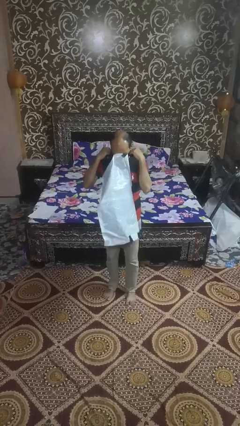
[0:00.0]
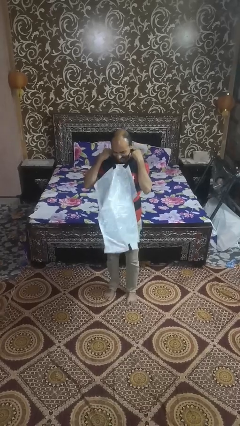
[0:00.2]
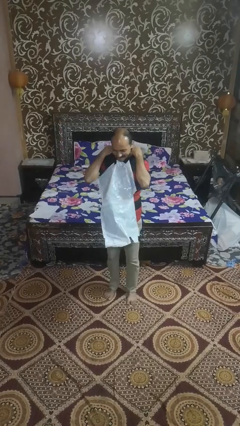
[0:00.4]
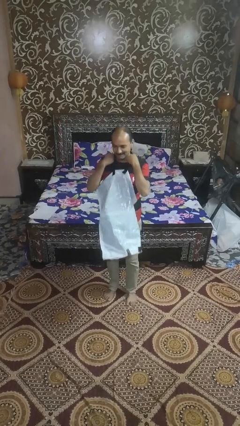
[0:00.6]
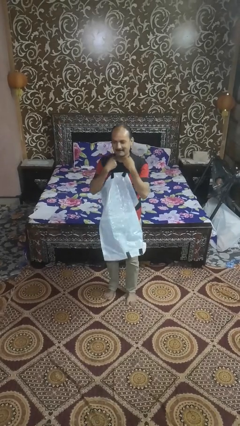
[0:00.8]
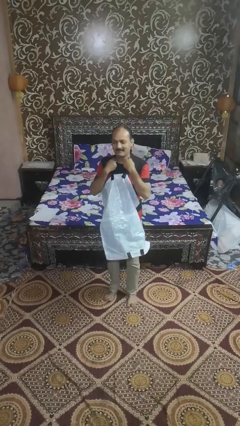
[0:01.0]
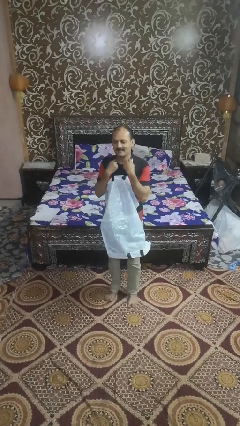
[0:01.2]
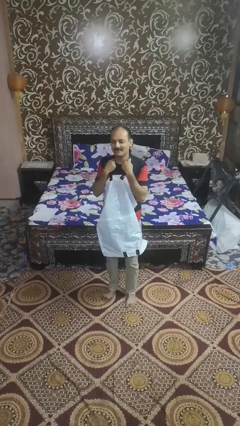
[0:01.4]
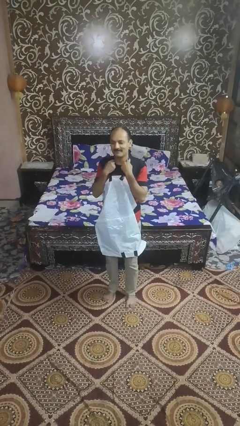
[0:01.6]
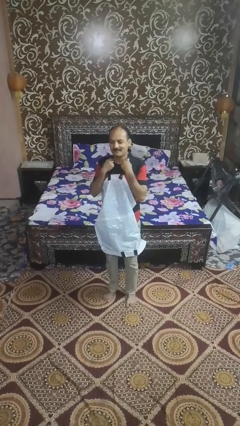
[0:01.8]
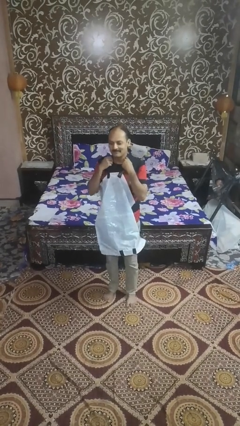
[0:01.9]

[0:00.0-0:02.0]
person tears paper

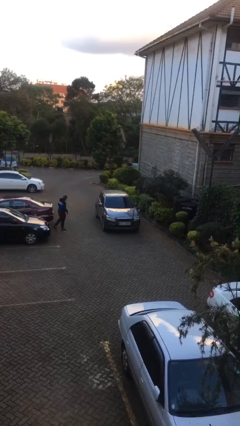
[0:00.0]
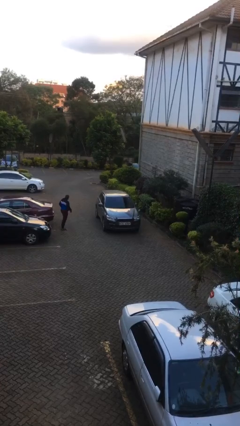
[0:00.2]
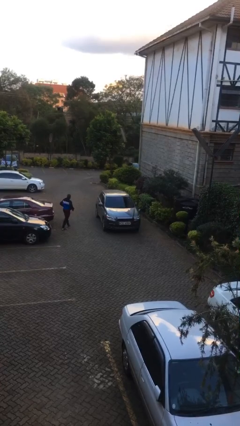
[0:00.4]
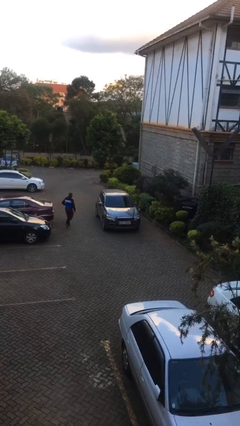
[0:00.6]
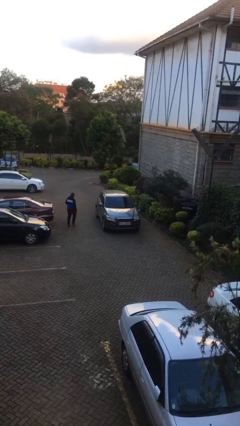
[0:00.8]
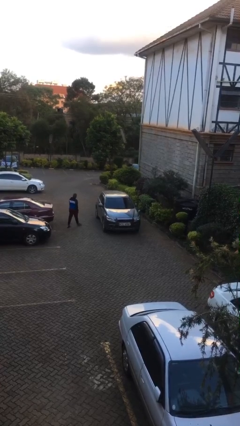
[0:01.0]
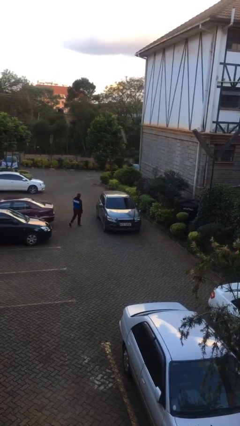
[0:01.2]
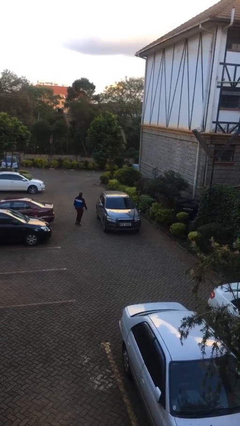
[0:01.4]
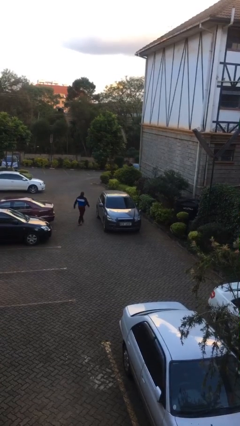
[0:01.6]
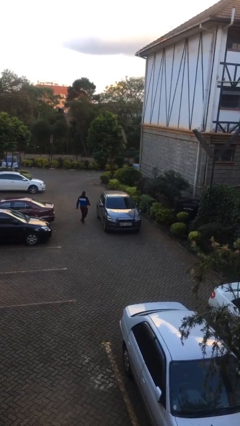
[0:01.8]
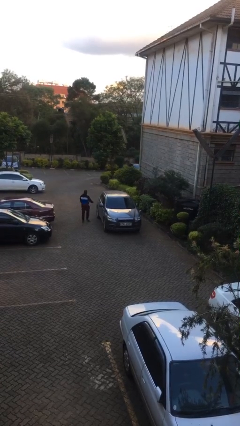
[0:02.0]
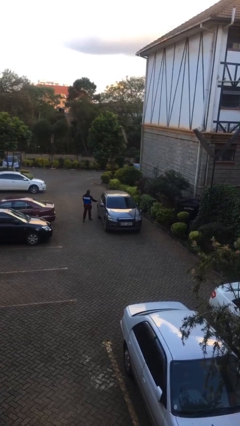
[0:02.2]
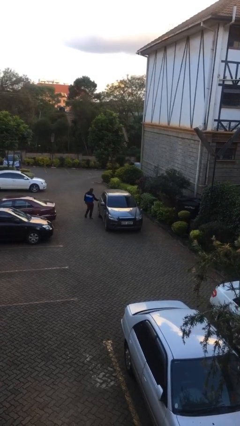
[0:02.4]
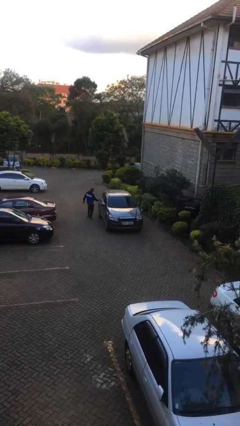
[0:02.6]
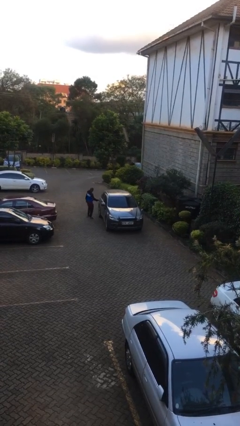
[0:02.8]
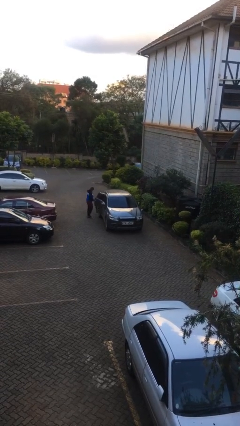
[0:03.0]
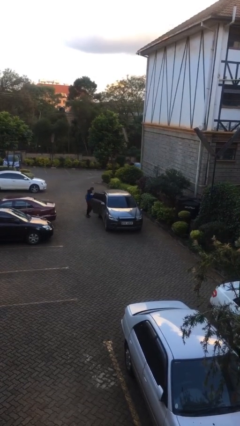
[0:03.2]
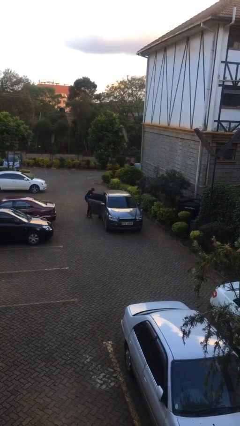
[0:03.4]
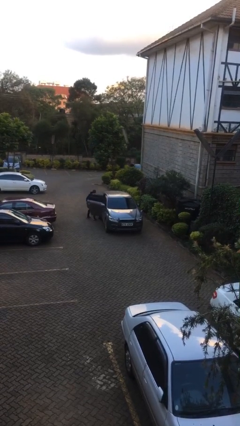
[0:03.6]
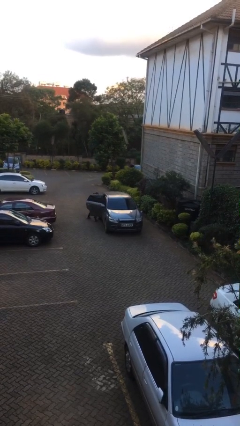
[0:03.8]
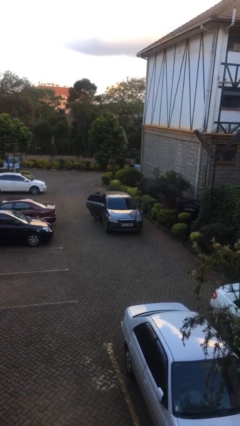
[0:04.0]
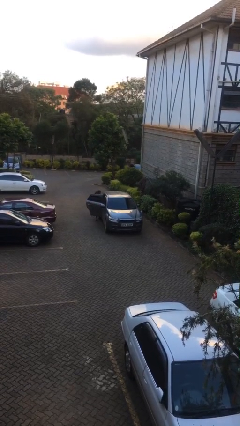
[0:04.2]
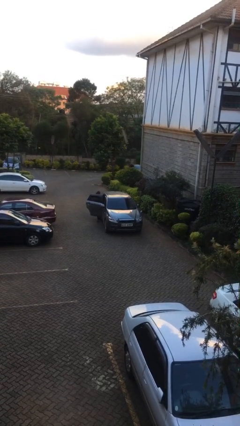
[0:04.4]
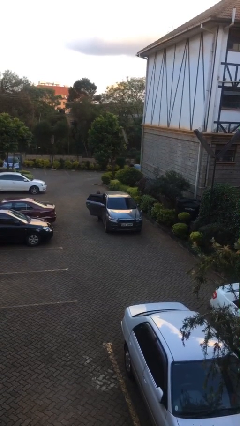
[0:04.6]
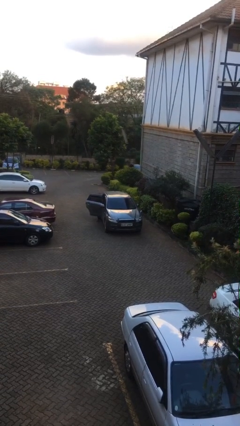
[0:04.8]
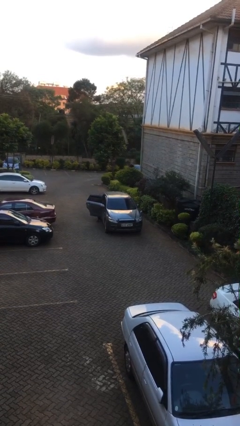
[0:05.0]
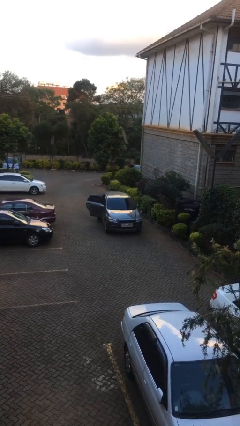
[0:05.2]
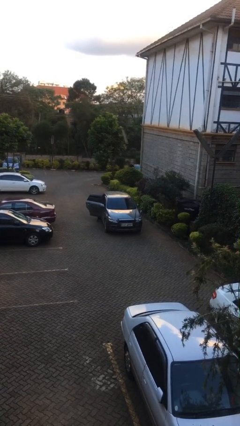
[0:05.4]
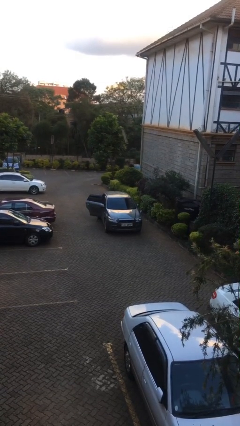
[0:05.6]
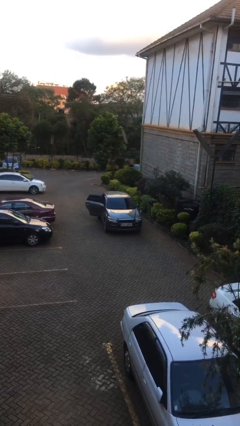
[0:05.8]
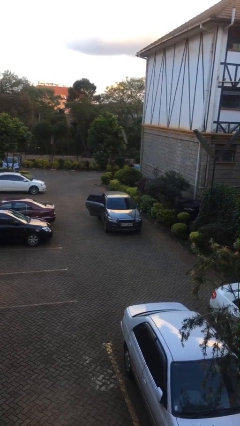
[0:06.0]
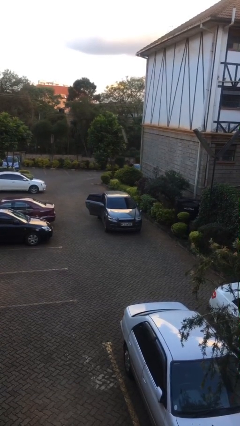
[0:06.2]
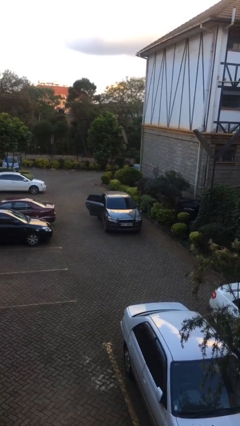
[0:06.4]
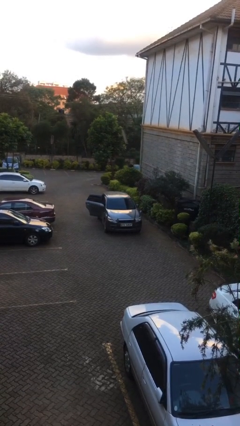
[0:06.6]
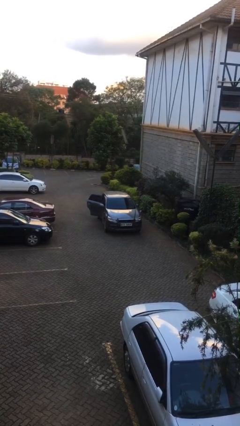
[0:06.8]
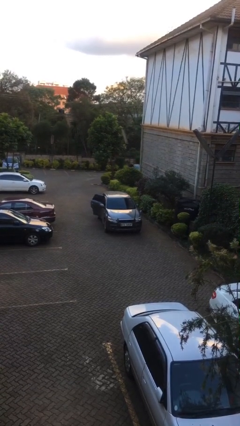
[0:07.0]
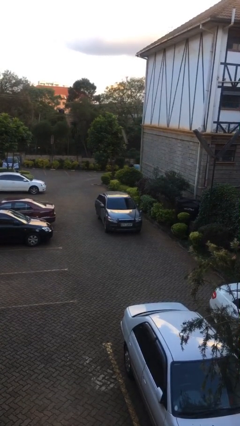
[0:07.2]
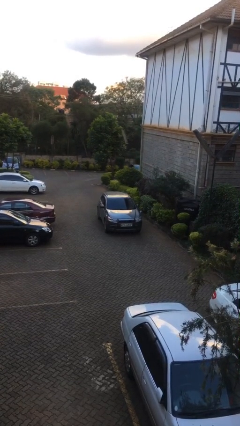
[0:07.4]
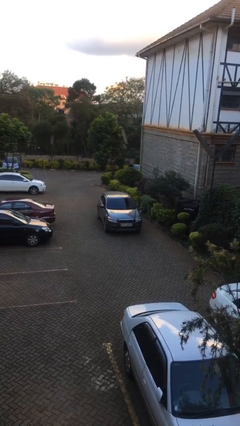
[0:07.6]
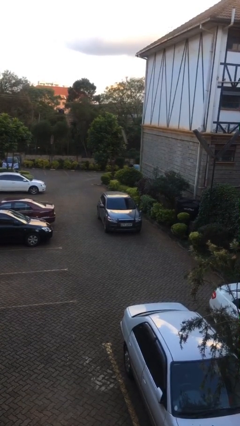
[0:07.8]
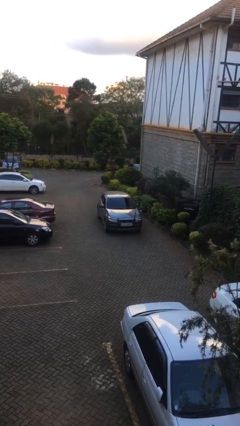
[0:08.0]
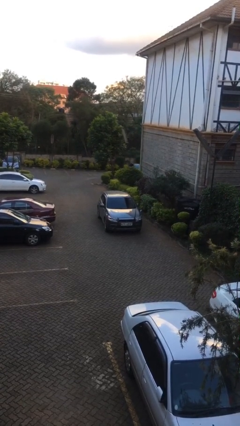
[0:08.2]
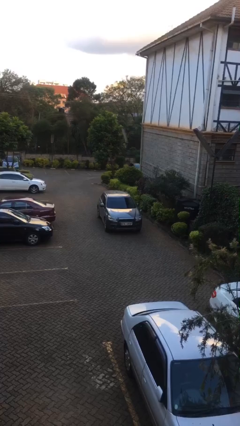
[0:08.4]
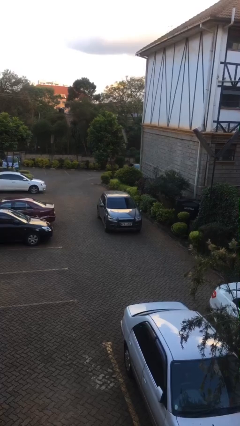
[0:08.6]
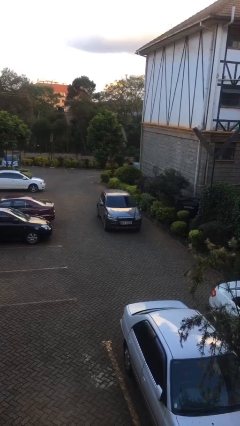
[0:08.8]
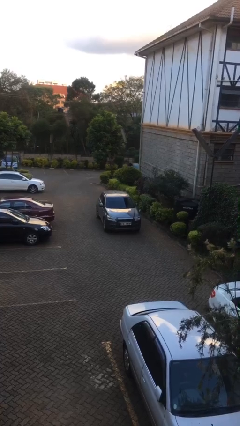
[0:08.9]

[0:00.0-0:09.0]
car picks up person

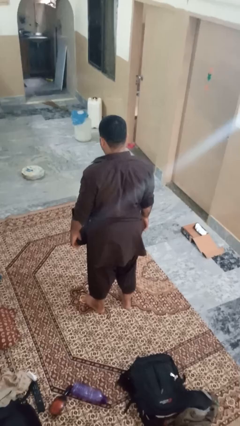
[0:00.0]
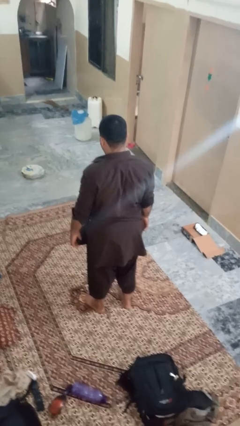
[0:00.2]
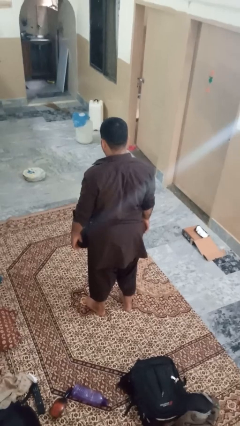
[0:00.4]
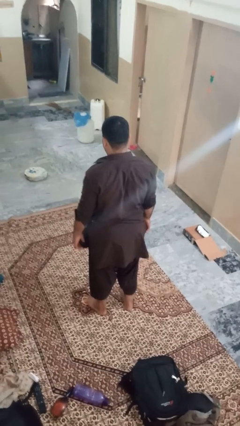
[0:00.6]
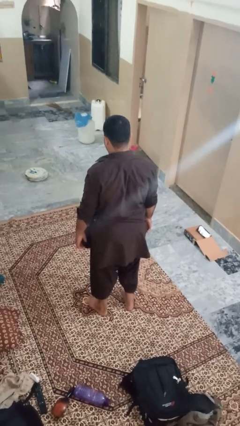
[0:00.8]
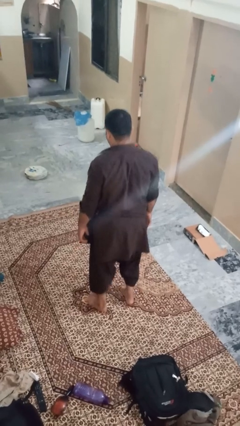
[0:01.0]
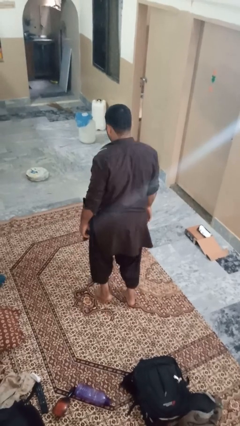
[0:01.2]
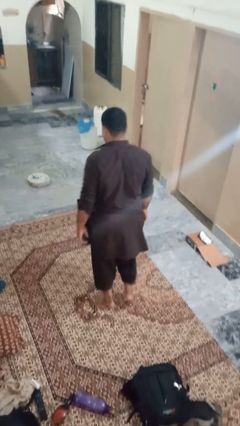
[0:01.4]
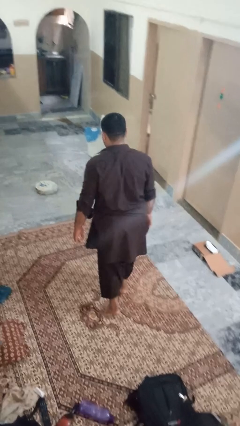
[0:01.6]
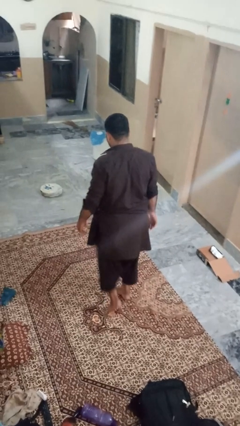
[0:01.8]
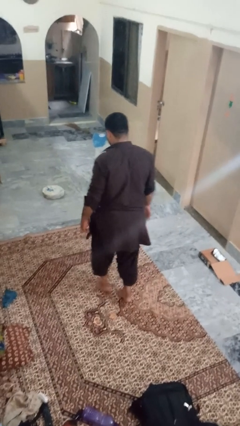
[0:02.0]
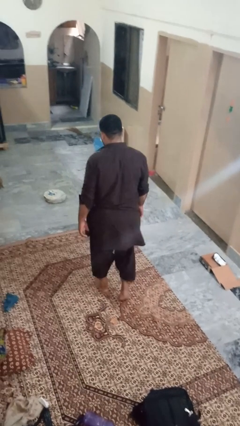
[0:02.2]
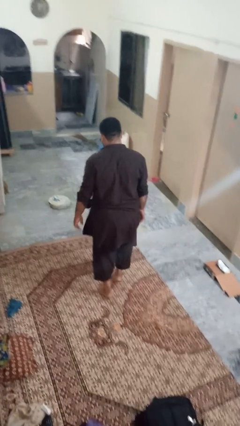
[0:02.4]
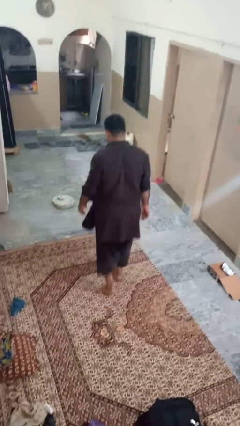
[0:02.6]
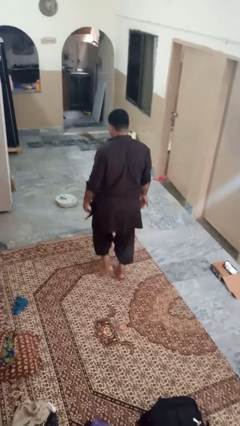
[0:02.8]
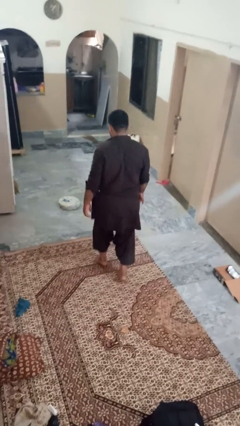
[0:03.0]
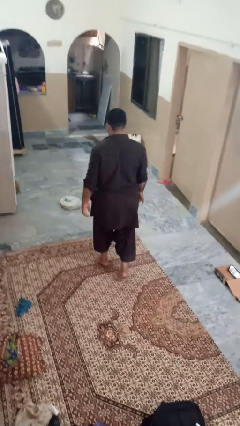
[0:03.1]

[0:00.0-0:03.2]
person walks tiptoe

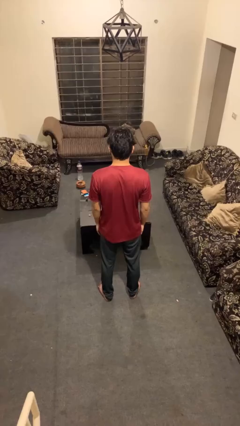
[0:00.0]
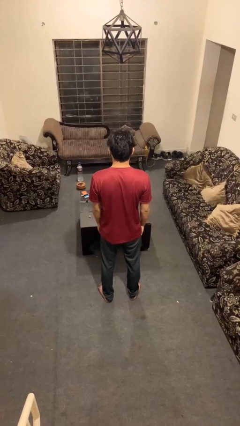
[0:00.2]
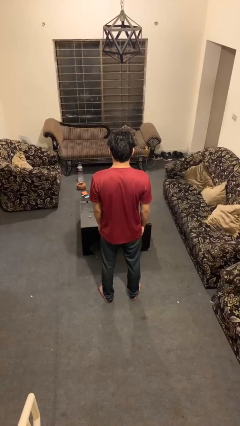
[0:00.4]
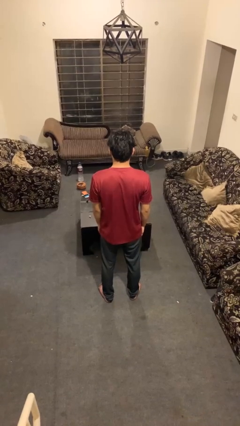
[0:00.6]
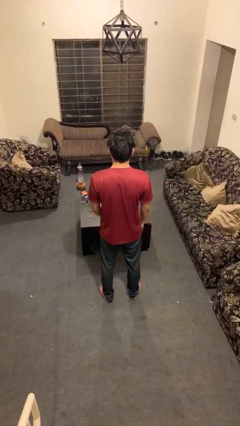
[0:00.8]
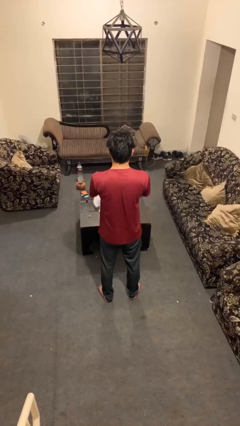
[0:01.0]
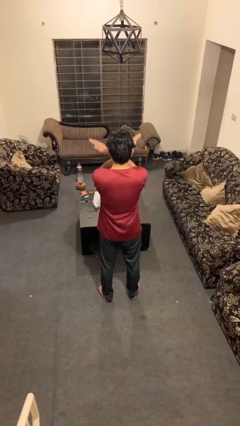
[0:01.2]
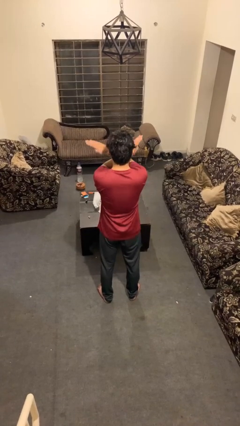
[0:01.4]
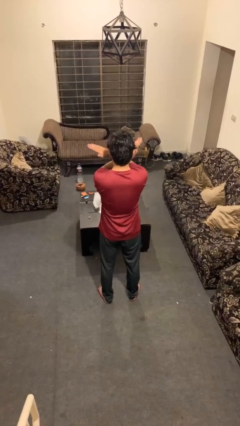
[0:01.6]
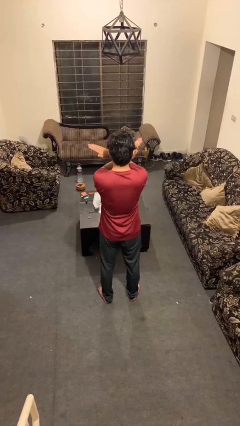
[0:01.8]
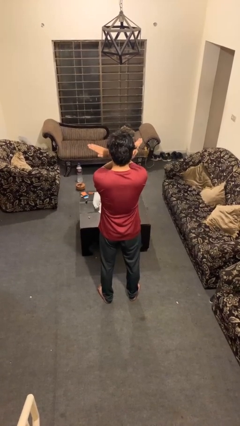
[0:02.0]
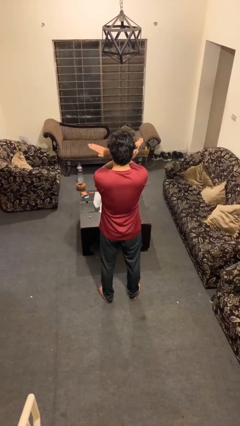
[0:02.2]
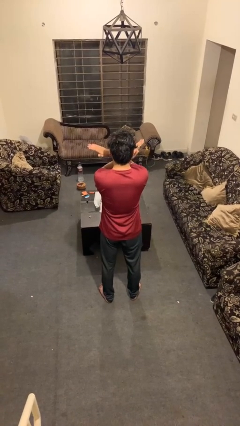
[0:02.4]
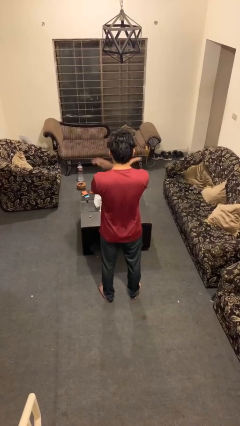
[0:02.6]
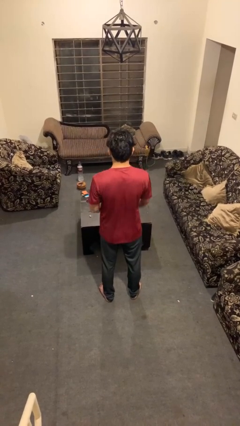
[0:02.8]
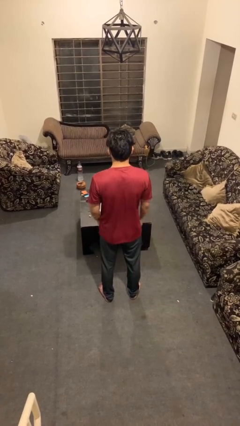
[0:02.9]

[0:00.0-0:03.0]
person gestures arms x

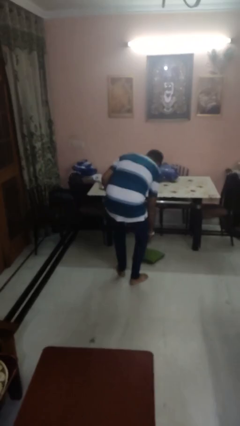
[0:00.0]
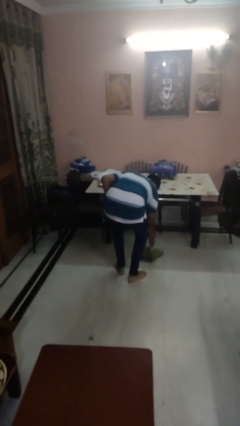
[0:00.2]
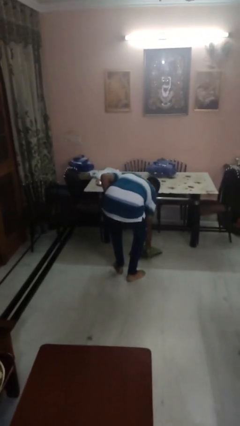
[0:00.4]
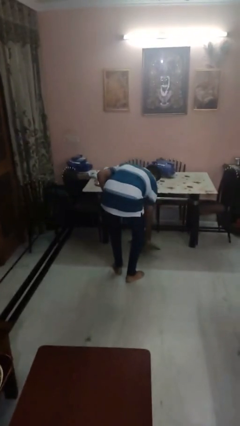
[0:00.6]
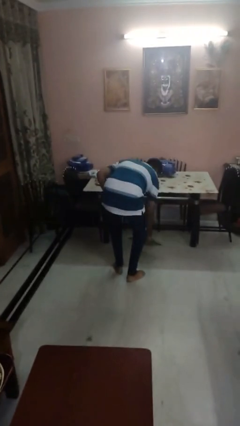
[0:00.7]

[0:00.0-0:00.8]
person picks up object from floor
